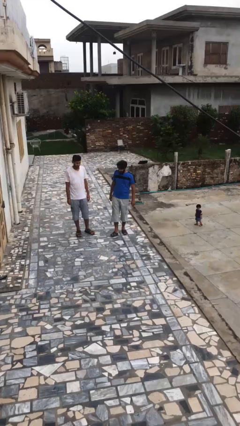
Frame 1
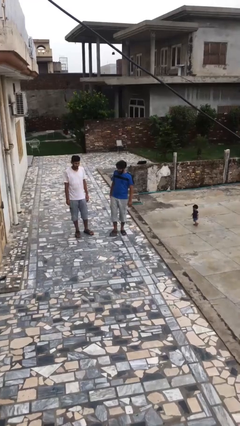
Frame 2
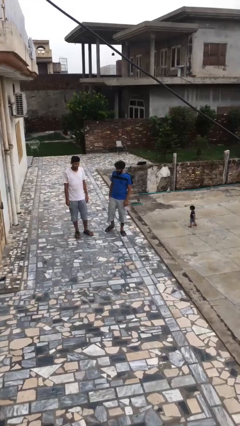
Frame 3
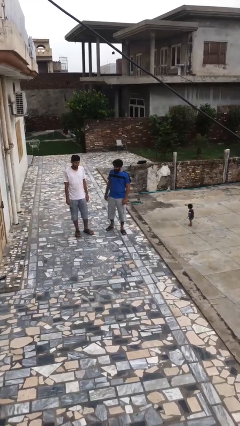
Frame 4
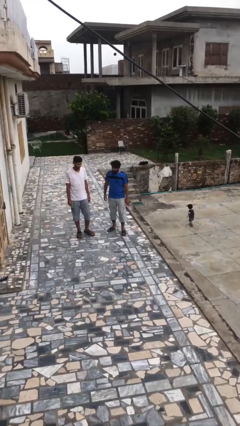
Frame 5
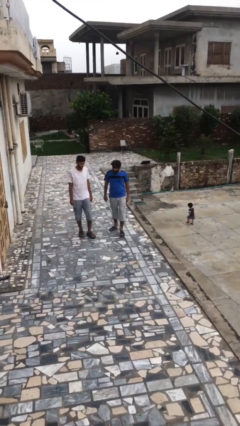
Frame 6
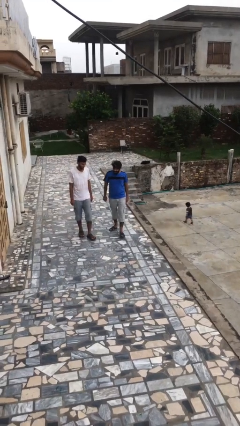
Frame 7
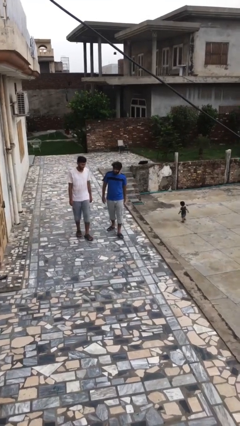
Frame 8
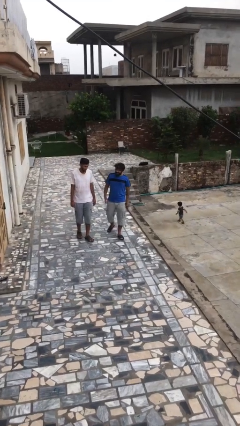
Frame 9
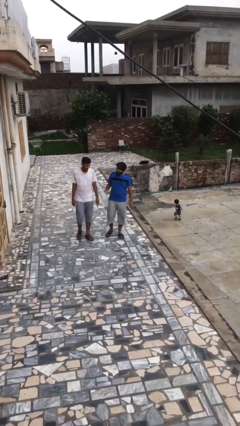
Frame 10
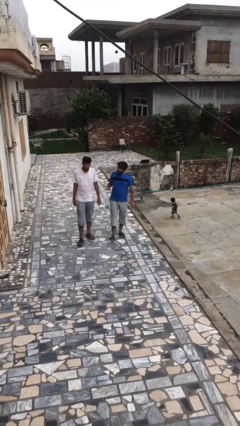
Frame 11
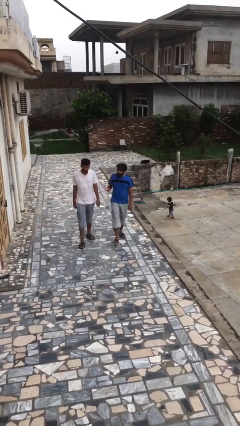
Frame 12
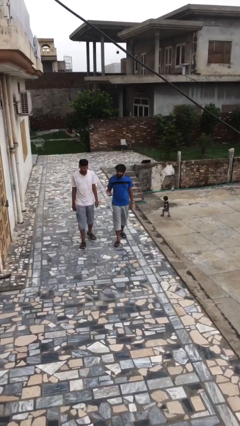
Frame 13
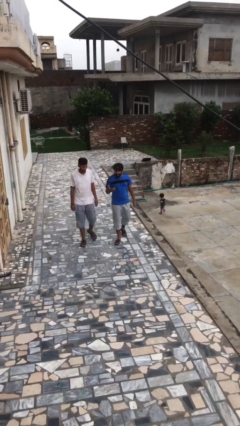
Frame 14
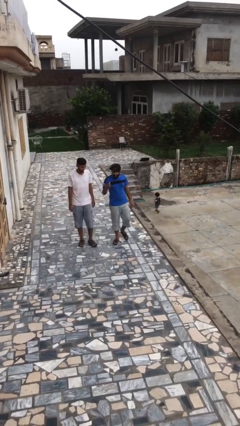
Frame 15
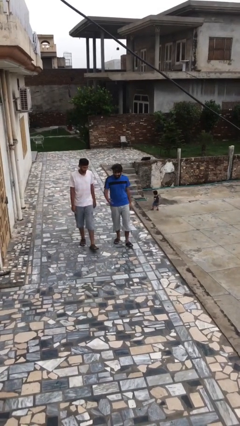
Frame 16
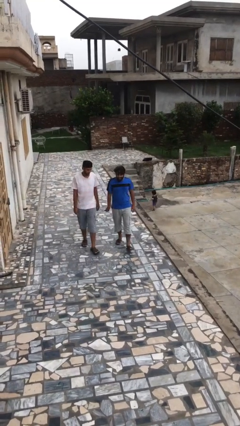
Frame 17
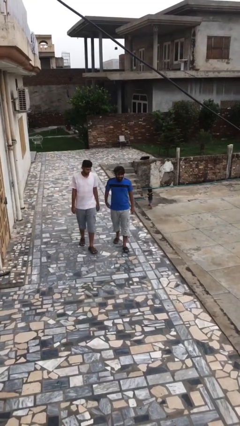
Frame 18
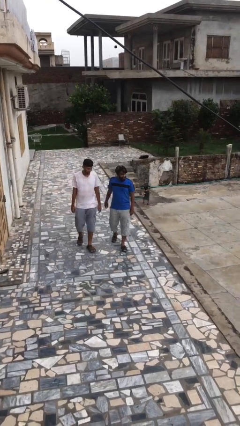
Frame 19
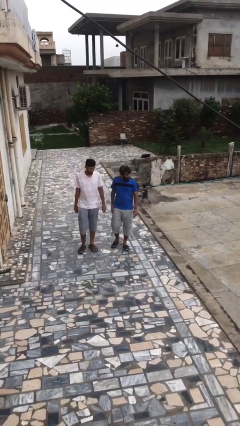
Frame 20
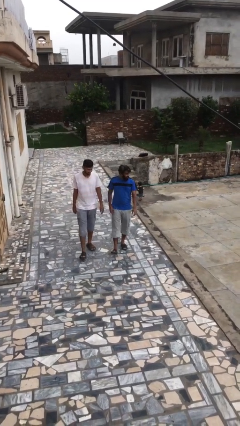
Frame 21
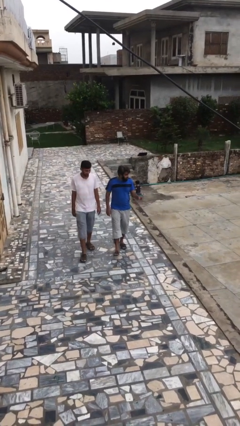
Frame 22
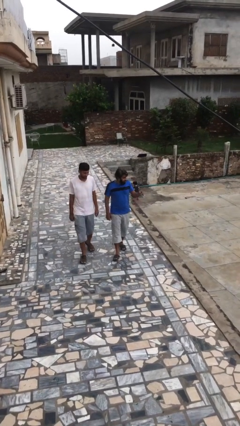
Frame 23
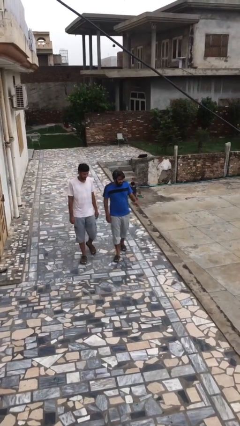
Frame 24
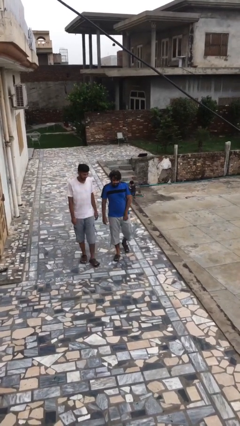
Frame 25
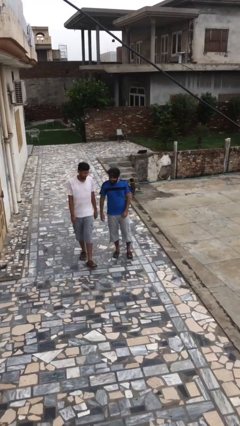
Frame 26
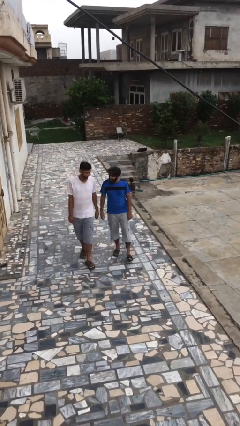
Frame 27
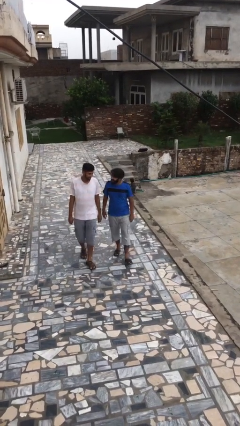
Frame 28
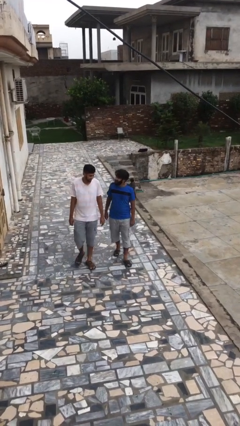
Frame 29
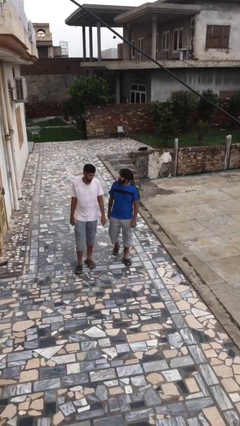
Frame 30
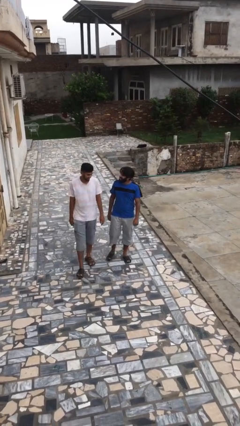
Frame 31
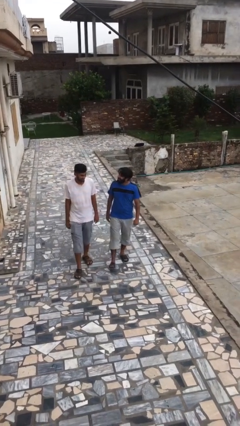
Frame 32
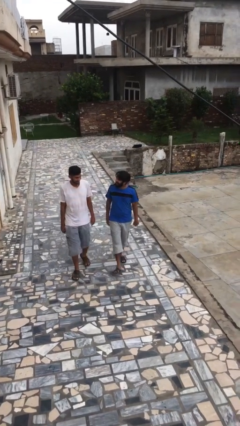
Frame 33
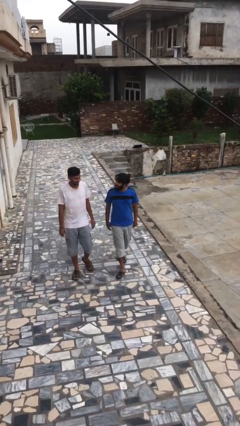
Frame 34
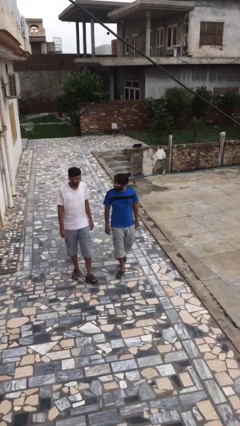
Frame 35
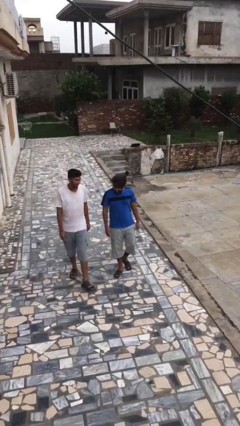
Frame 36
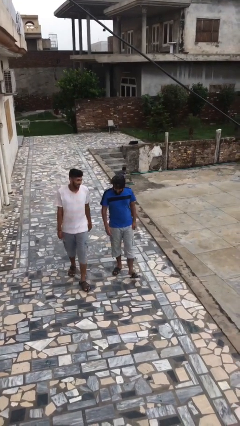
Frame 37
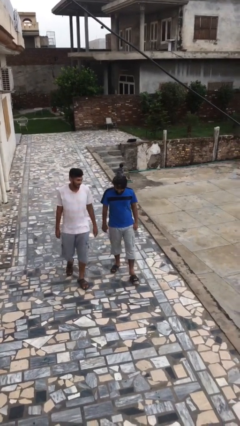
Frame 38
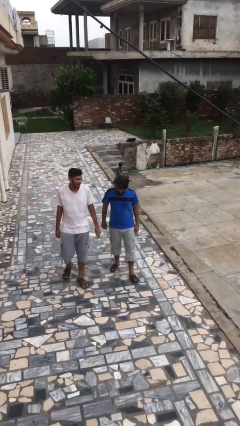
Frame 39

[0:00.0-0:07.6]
person talks to person

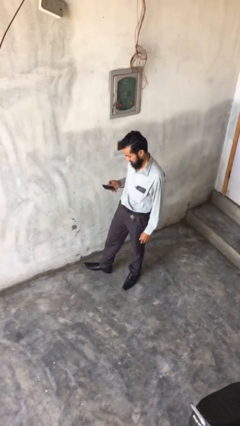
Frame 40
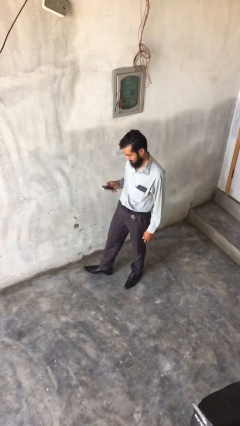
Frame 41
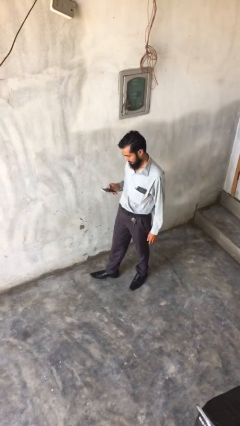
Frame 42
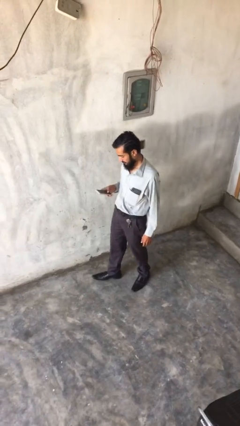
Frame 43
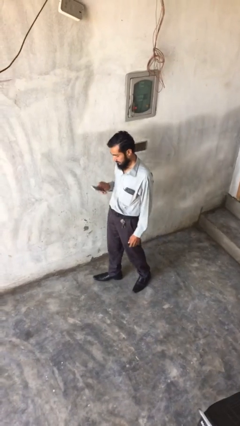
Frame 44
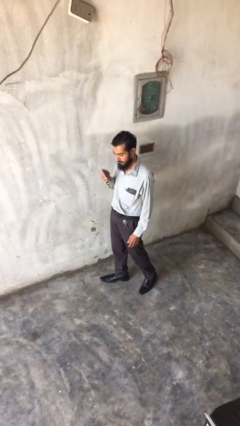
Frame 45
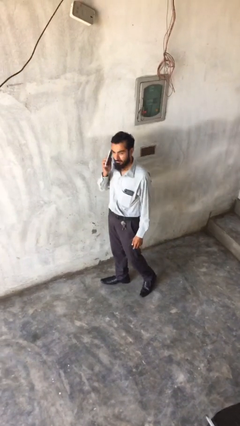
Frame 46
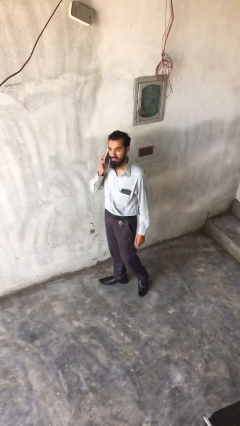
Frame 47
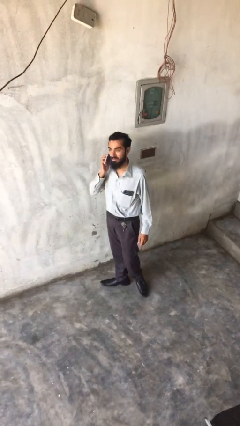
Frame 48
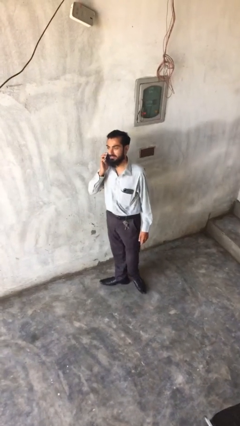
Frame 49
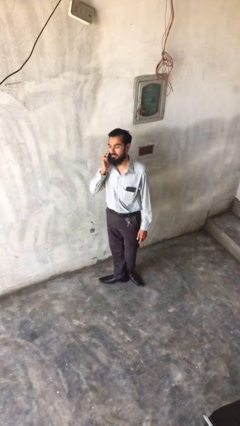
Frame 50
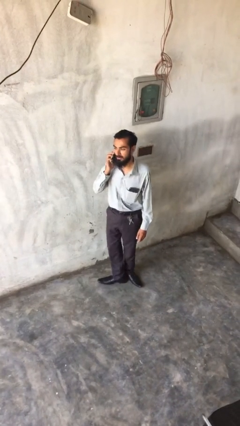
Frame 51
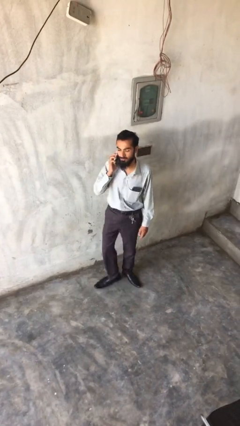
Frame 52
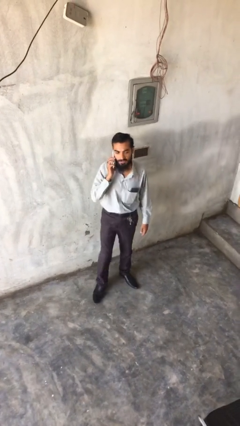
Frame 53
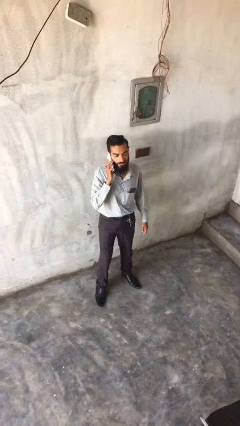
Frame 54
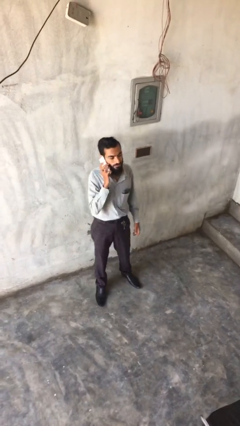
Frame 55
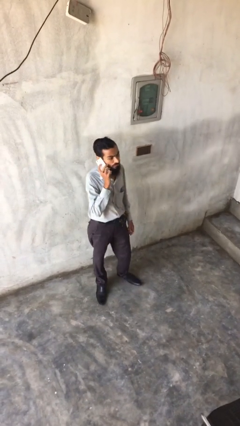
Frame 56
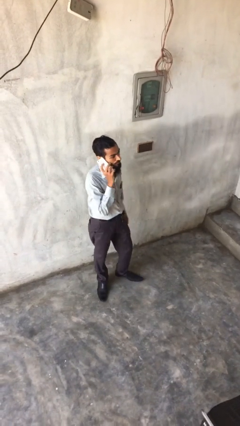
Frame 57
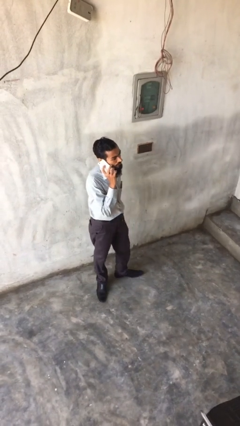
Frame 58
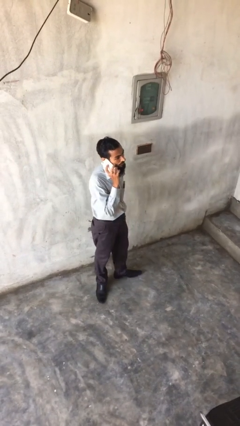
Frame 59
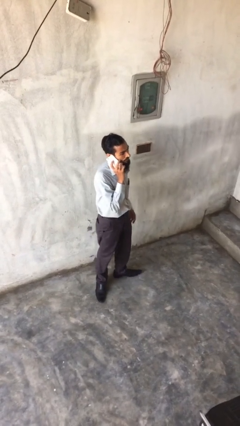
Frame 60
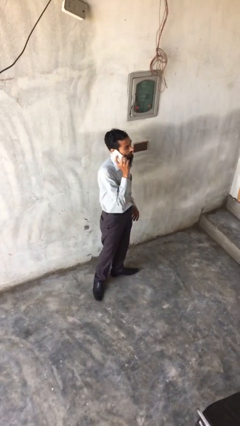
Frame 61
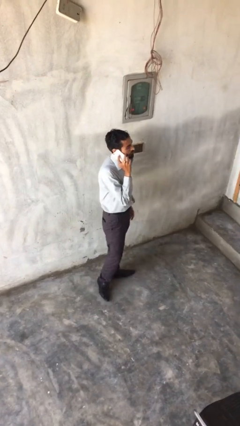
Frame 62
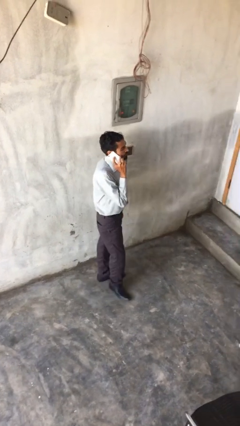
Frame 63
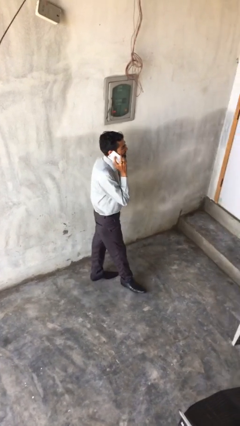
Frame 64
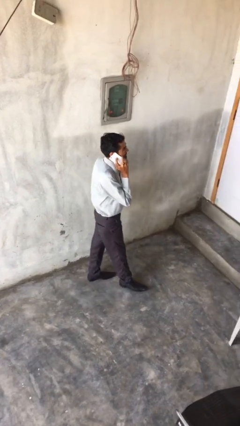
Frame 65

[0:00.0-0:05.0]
person talks on phone

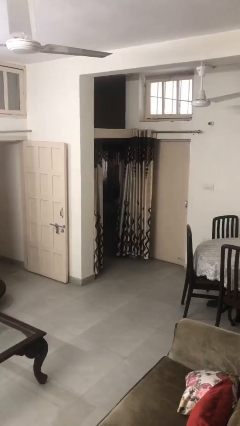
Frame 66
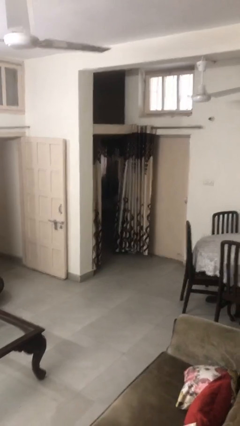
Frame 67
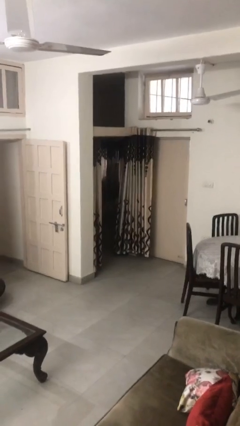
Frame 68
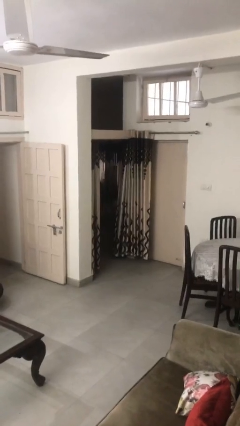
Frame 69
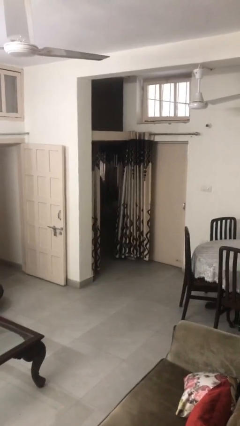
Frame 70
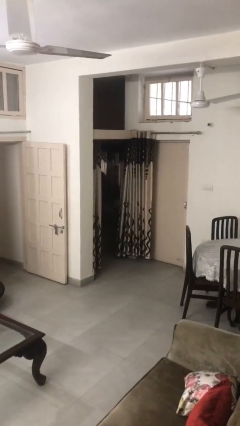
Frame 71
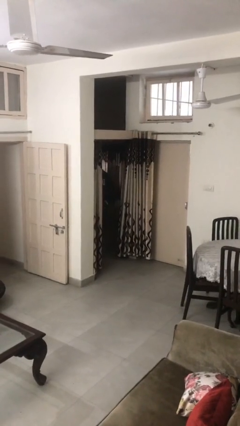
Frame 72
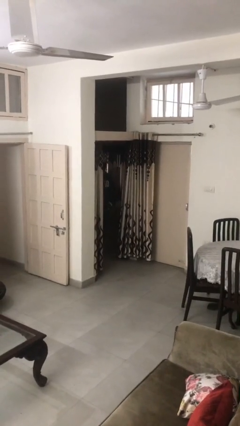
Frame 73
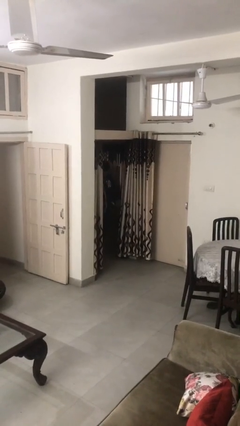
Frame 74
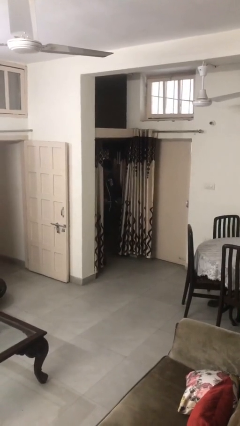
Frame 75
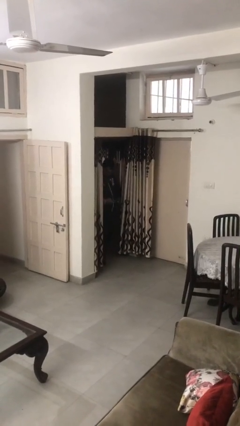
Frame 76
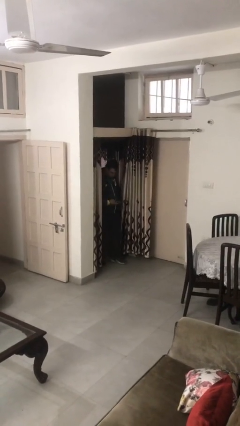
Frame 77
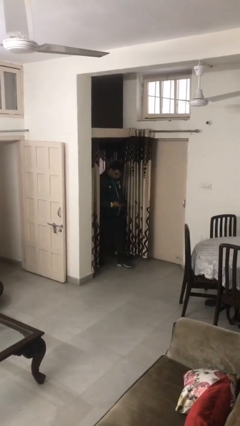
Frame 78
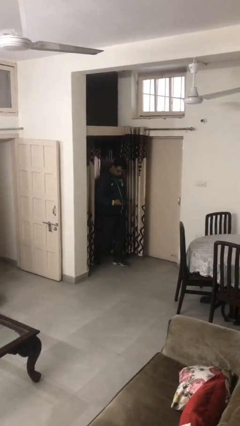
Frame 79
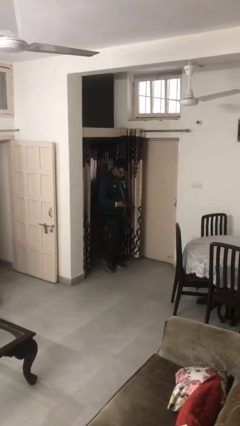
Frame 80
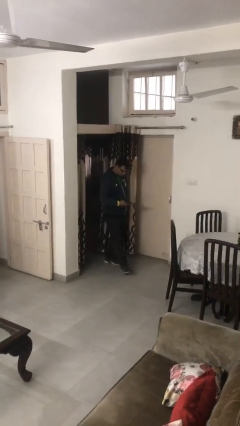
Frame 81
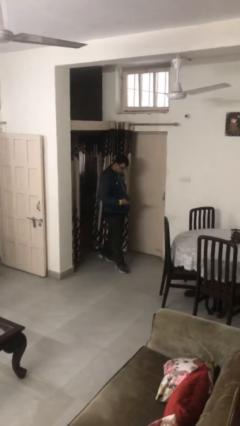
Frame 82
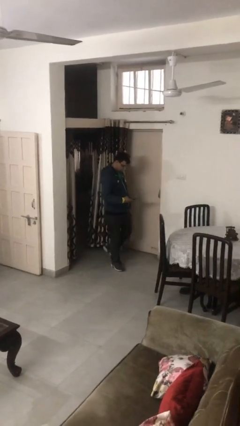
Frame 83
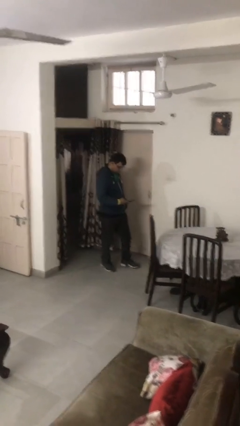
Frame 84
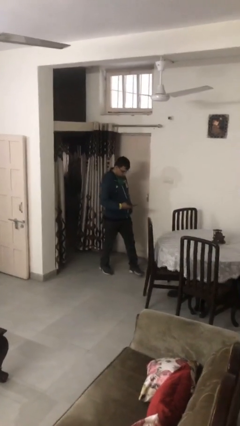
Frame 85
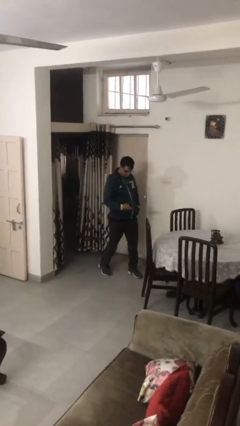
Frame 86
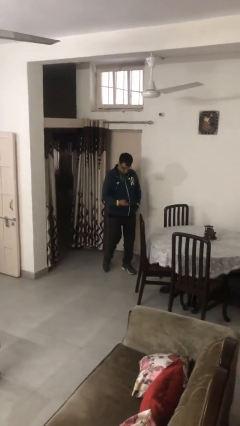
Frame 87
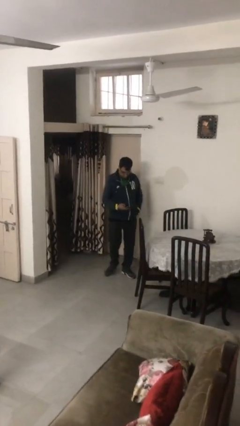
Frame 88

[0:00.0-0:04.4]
person enters scene through structure

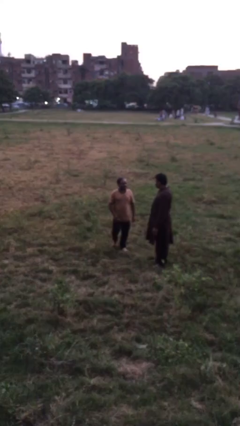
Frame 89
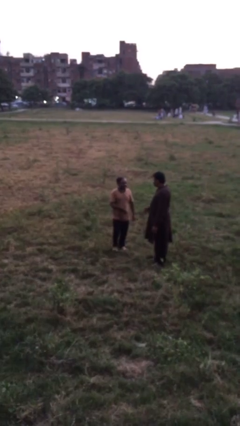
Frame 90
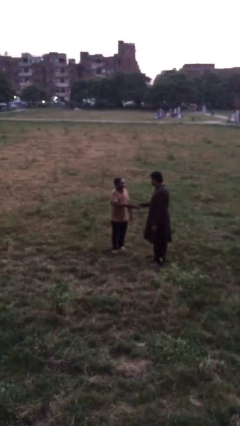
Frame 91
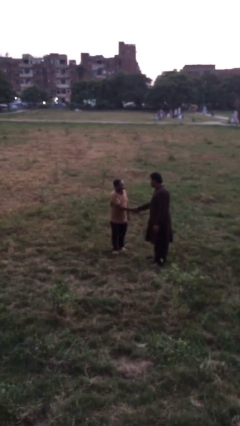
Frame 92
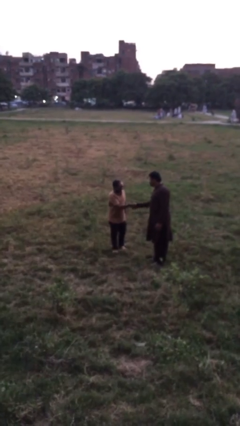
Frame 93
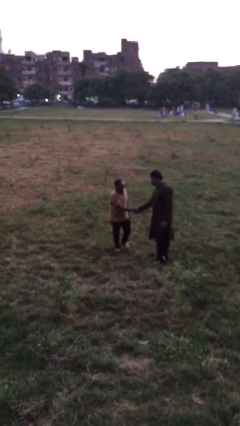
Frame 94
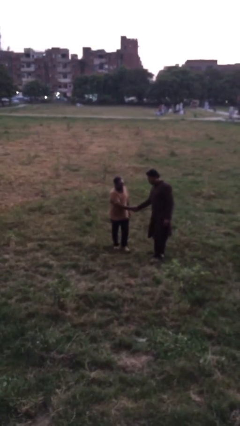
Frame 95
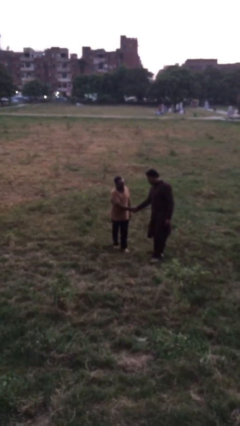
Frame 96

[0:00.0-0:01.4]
person shakes hand
